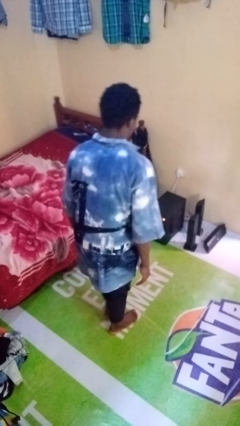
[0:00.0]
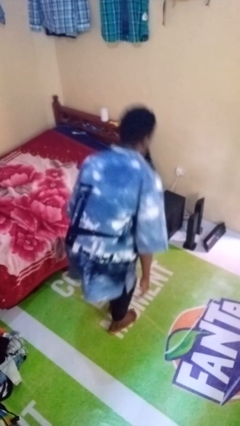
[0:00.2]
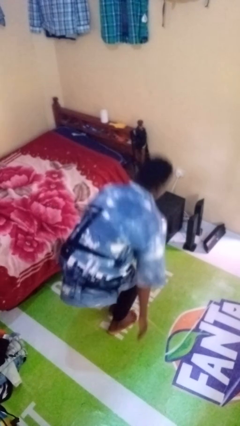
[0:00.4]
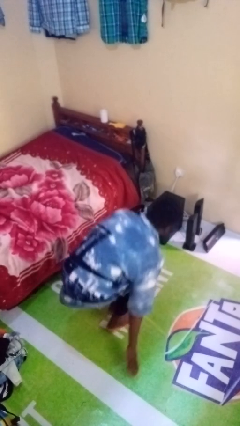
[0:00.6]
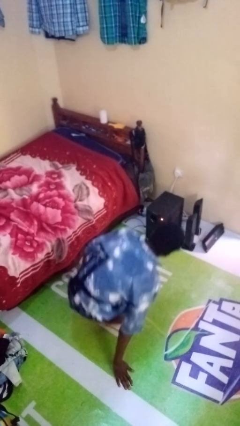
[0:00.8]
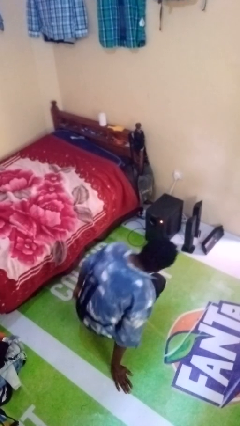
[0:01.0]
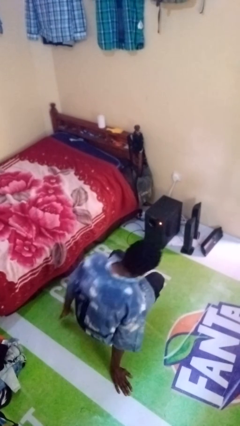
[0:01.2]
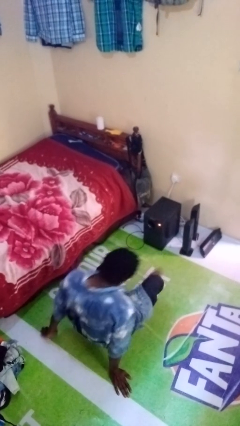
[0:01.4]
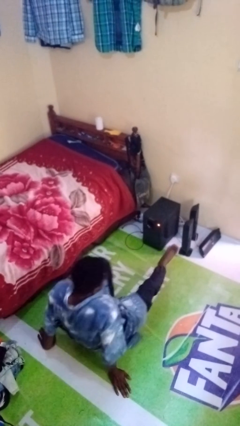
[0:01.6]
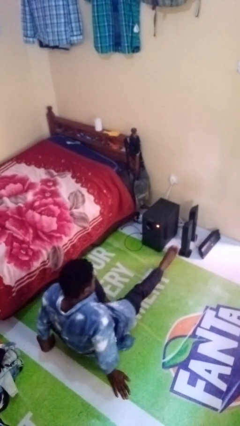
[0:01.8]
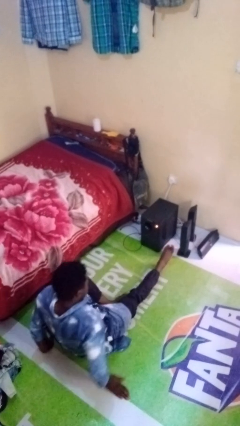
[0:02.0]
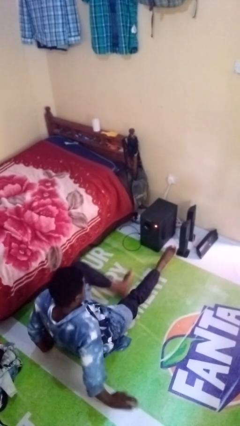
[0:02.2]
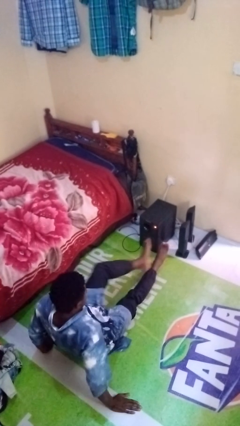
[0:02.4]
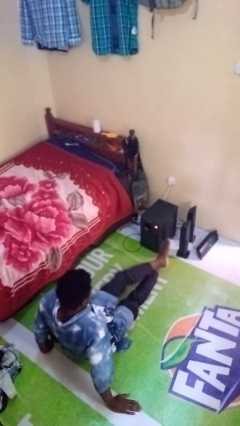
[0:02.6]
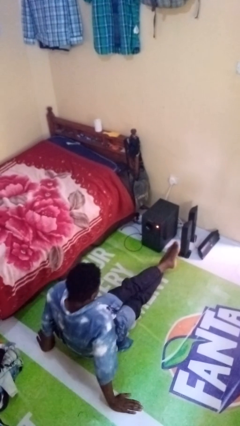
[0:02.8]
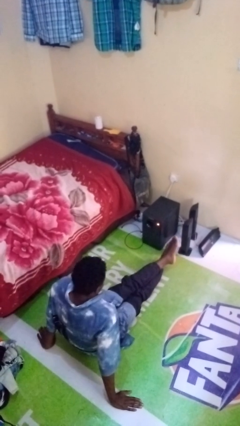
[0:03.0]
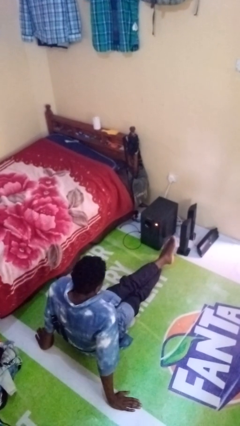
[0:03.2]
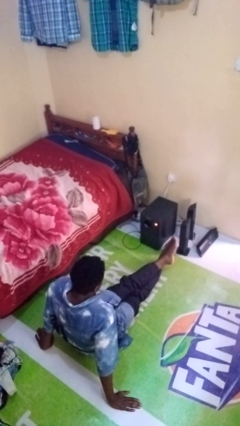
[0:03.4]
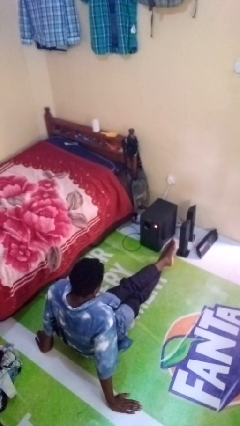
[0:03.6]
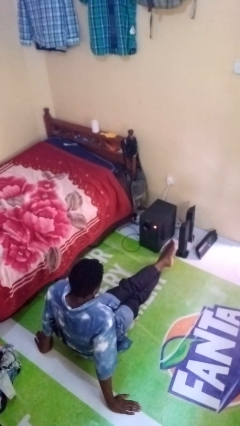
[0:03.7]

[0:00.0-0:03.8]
person sits crisscross

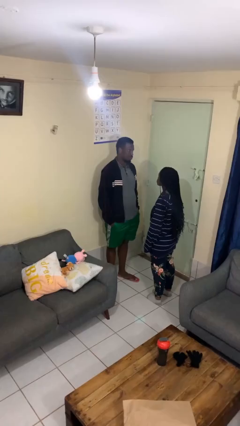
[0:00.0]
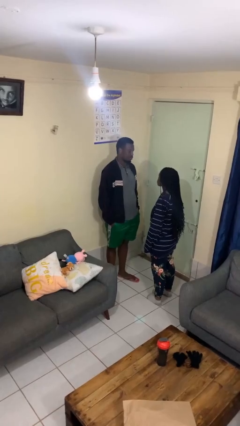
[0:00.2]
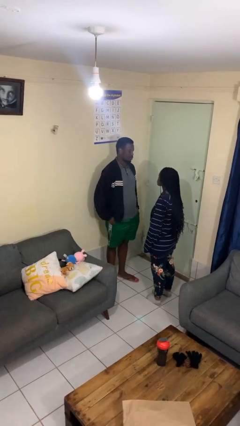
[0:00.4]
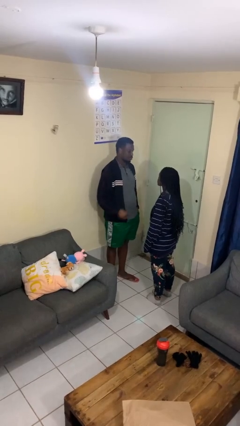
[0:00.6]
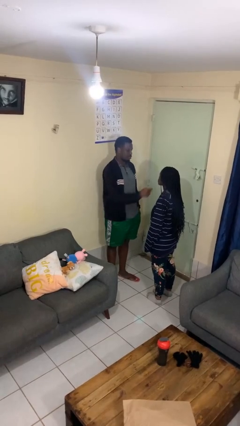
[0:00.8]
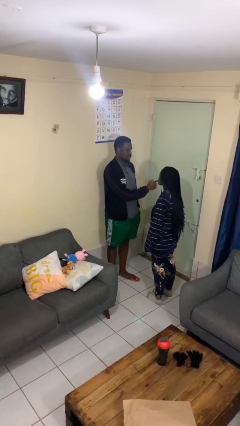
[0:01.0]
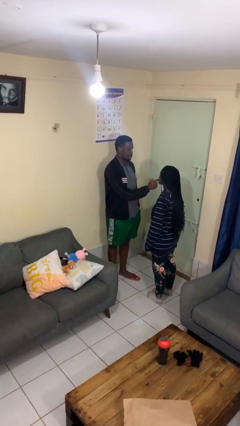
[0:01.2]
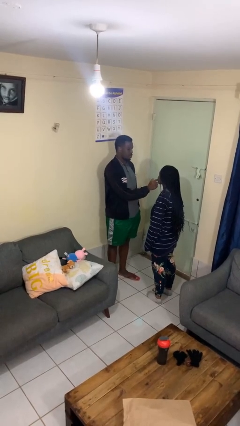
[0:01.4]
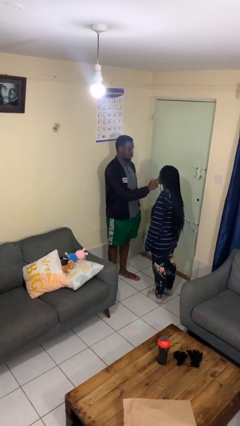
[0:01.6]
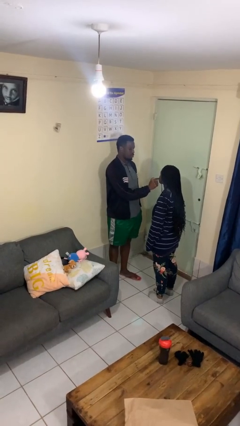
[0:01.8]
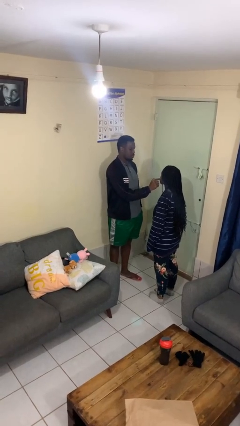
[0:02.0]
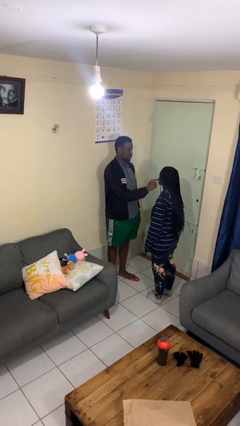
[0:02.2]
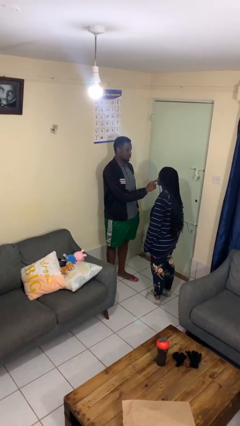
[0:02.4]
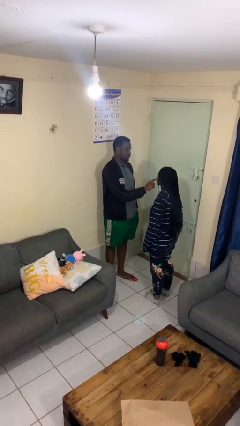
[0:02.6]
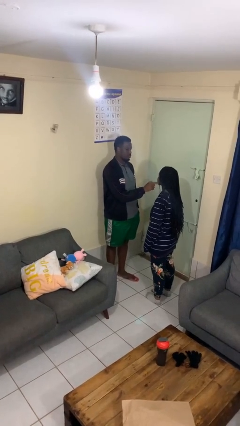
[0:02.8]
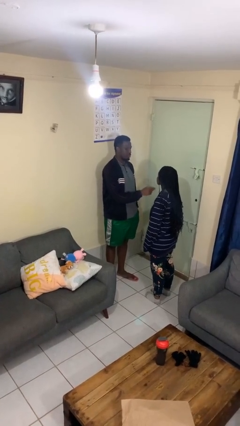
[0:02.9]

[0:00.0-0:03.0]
person touches face of person

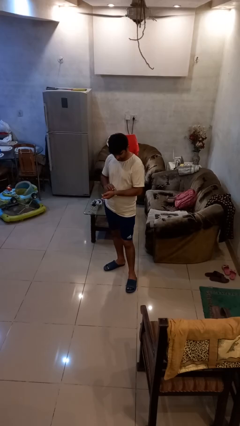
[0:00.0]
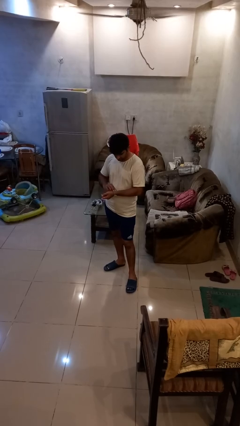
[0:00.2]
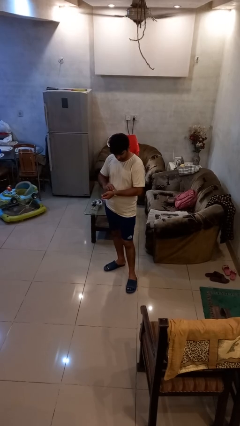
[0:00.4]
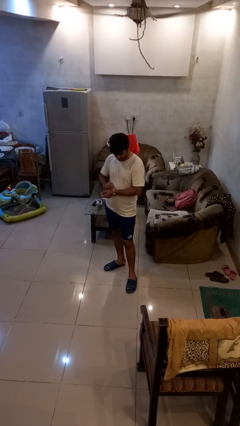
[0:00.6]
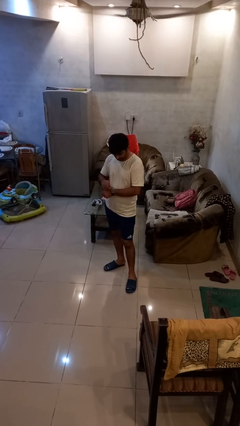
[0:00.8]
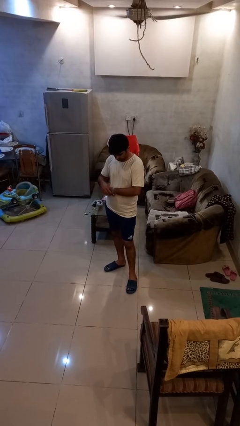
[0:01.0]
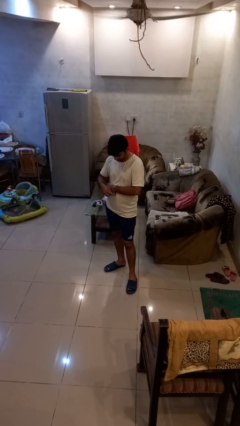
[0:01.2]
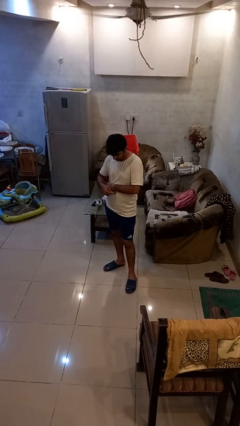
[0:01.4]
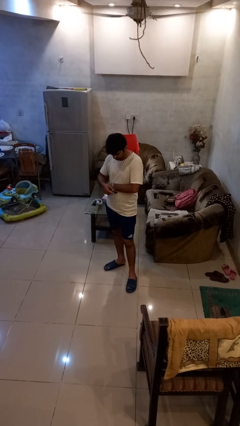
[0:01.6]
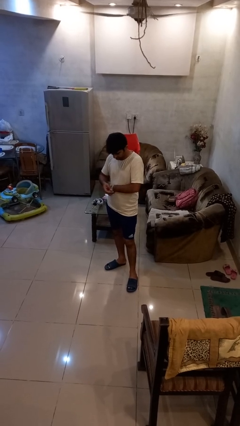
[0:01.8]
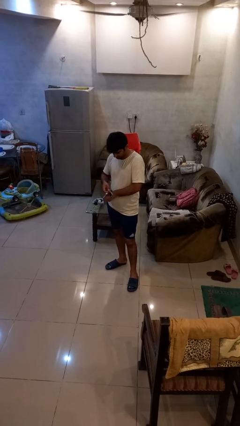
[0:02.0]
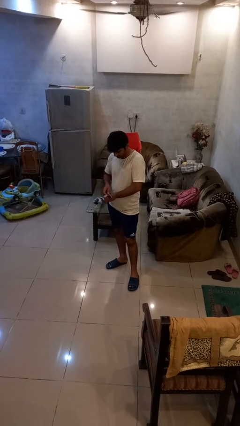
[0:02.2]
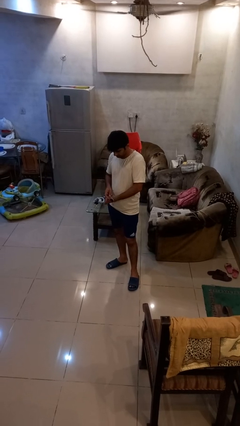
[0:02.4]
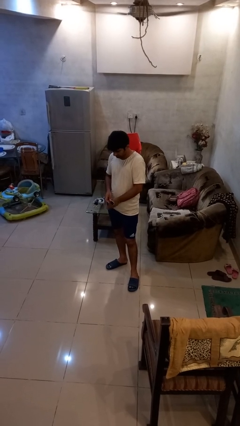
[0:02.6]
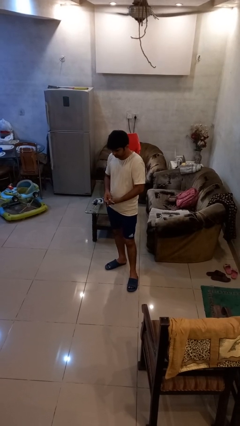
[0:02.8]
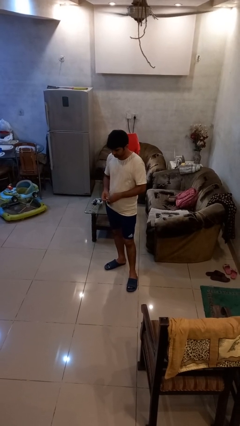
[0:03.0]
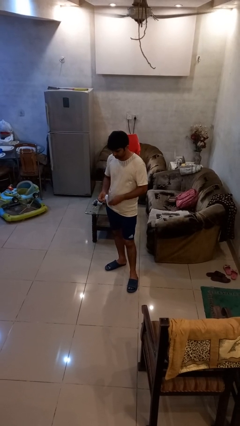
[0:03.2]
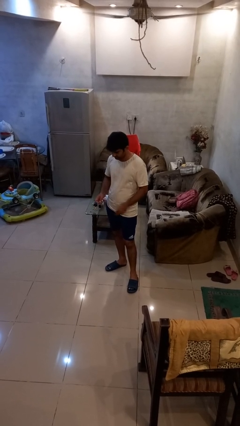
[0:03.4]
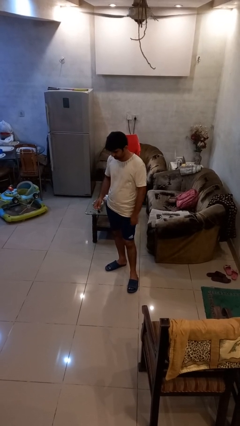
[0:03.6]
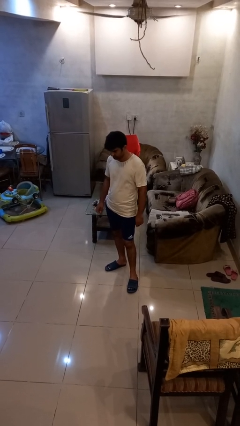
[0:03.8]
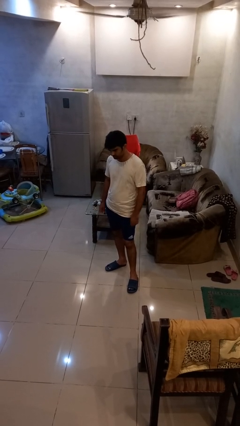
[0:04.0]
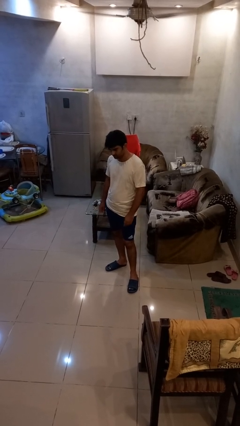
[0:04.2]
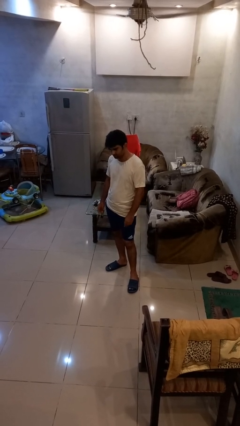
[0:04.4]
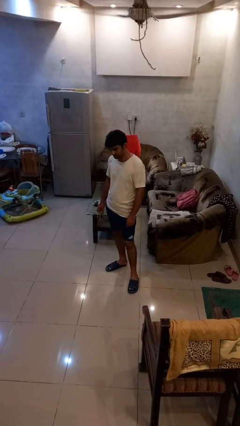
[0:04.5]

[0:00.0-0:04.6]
person takes off wristwatch

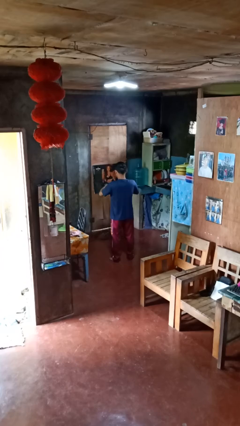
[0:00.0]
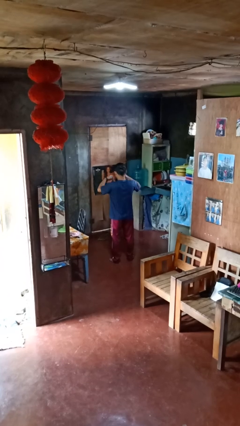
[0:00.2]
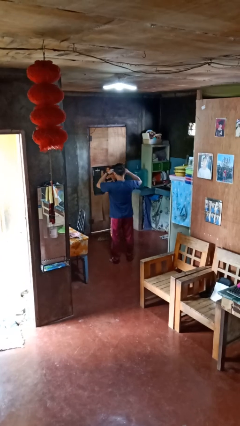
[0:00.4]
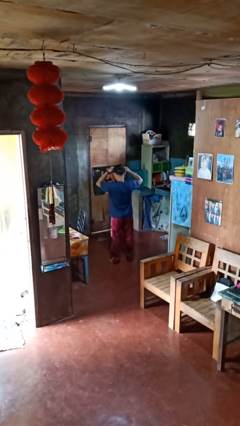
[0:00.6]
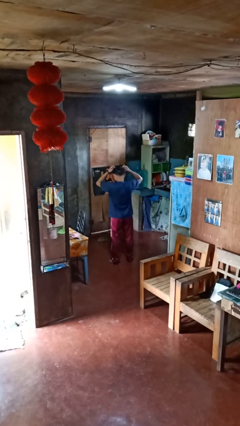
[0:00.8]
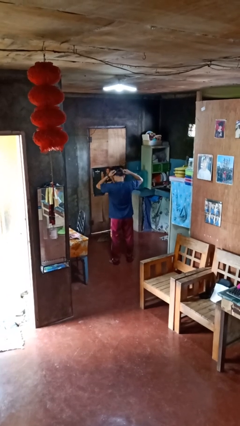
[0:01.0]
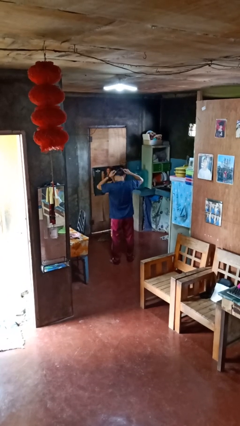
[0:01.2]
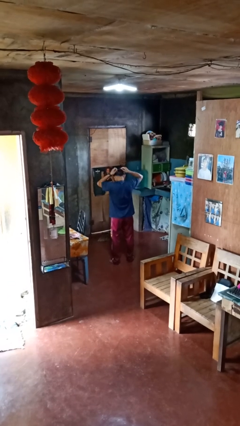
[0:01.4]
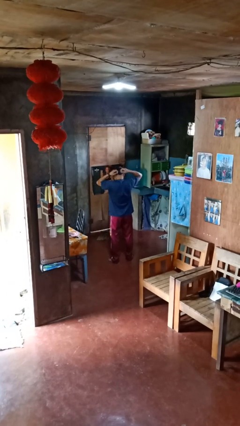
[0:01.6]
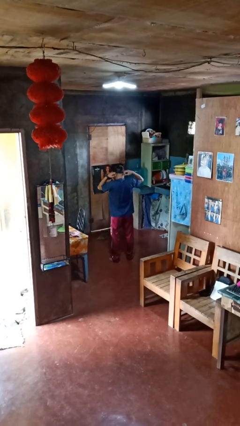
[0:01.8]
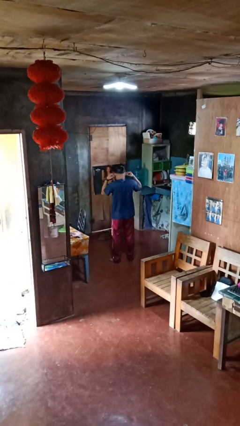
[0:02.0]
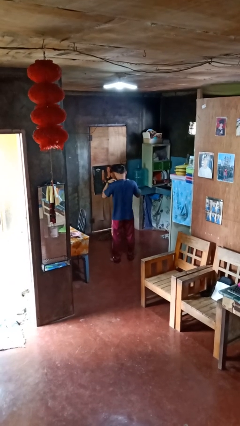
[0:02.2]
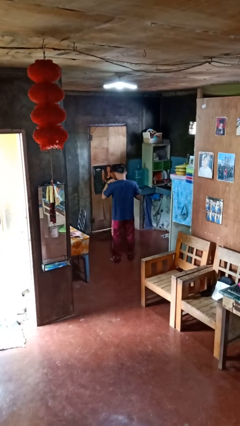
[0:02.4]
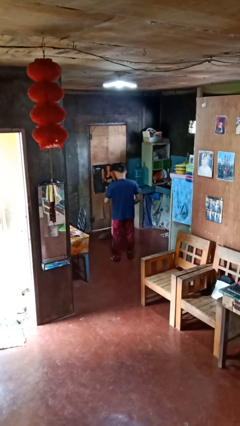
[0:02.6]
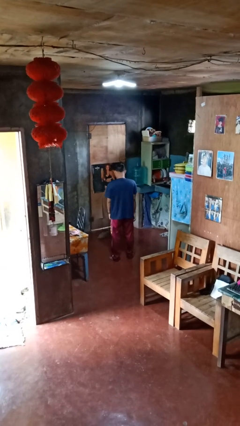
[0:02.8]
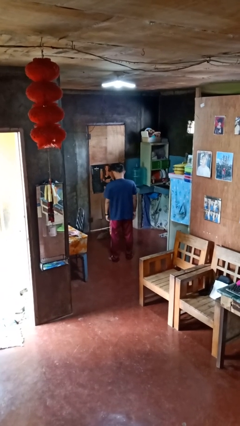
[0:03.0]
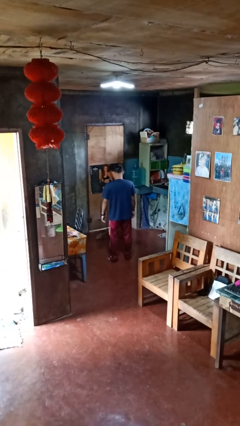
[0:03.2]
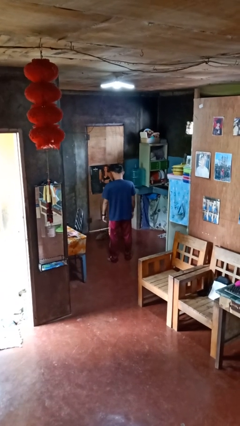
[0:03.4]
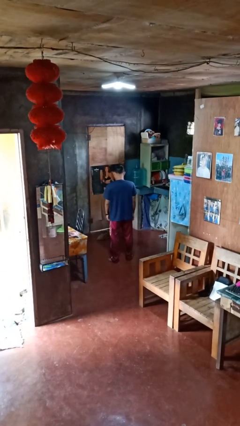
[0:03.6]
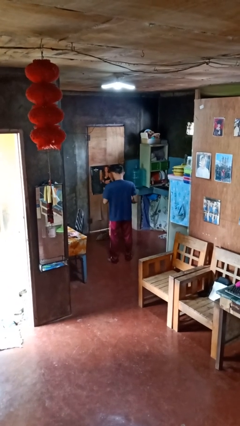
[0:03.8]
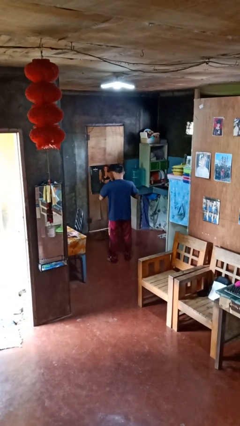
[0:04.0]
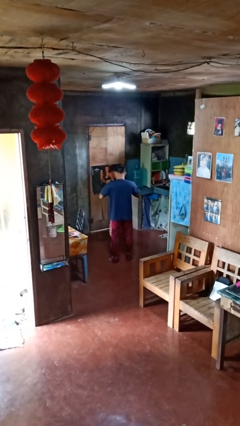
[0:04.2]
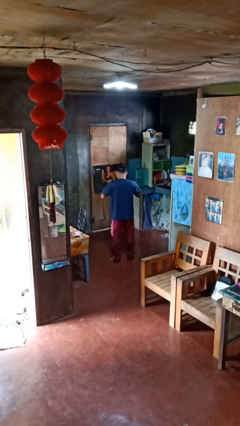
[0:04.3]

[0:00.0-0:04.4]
person puts on necklace

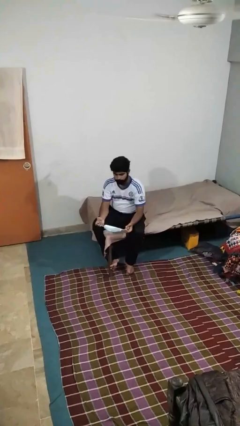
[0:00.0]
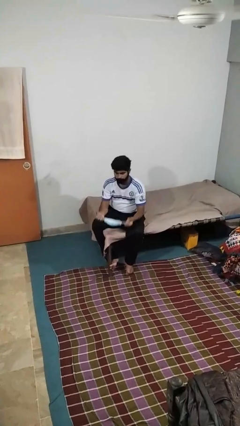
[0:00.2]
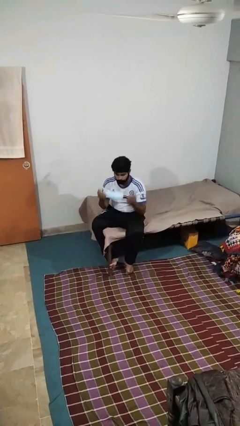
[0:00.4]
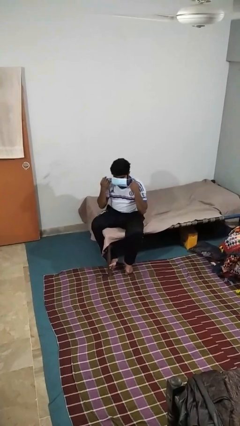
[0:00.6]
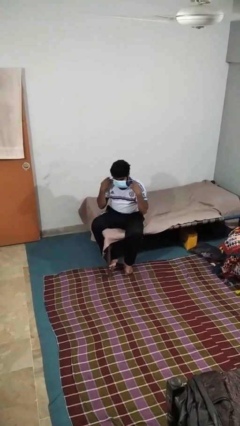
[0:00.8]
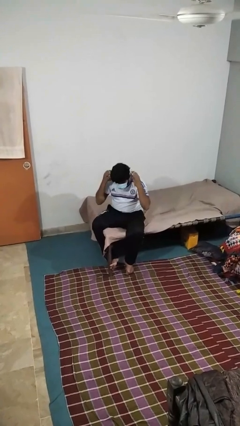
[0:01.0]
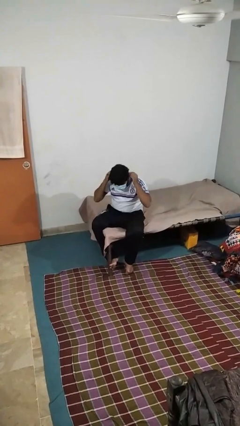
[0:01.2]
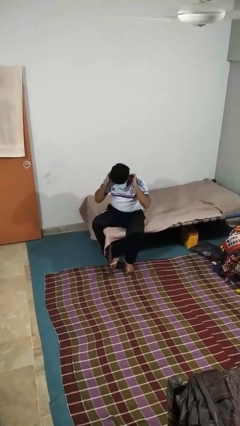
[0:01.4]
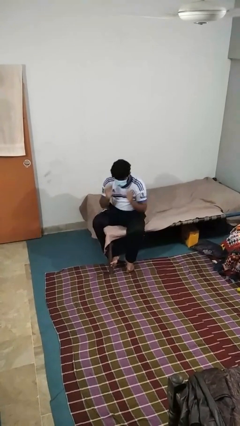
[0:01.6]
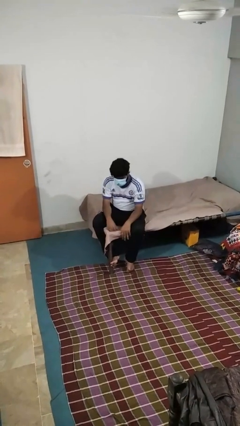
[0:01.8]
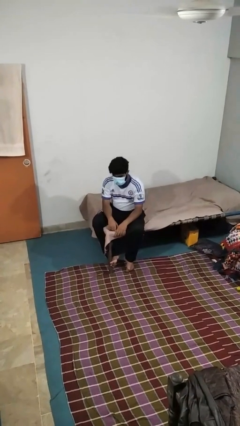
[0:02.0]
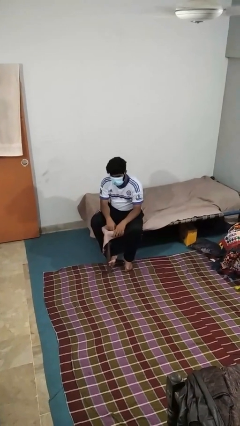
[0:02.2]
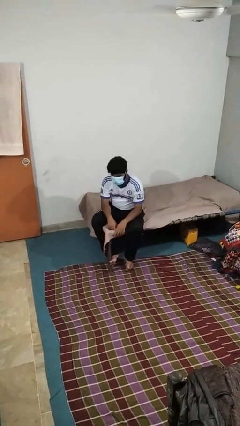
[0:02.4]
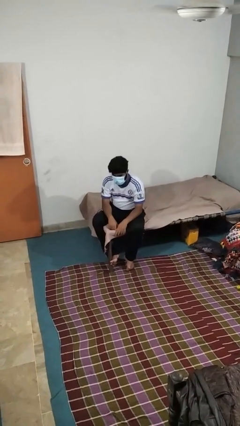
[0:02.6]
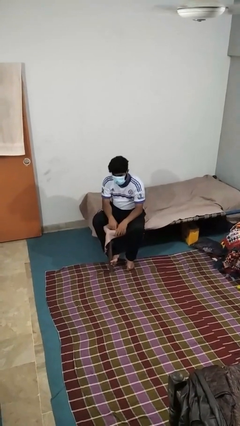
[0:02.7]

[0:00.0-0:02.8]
person puts on facemask
